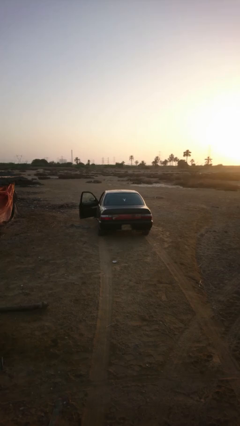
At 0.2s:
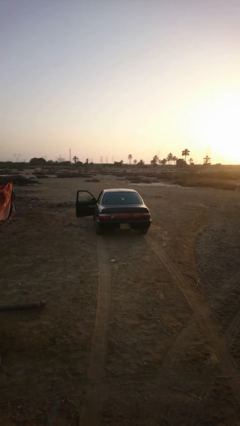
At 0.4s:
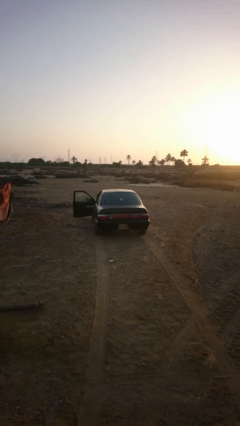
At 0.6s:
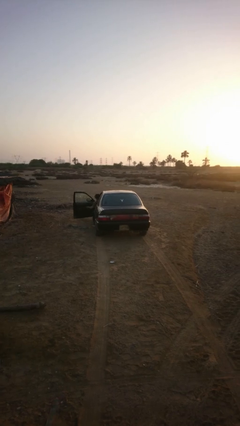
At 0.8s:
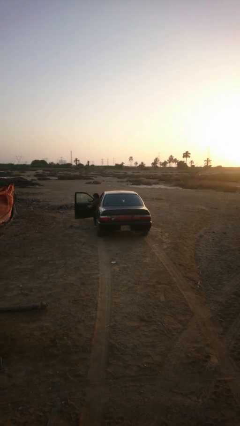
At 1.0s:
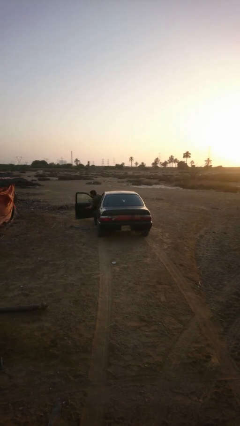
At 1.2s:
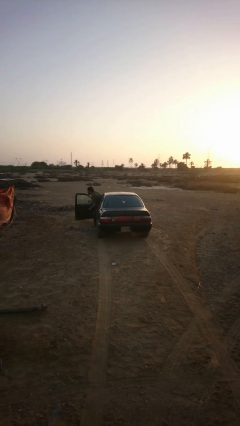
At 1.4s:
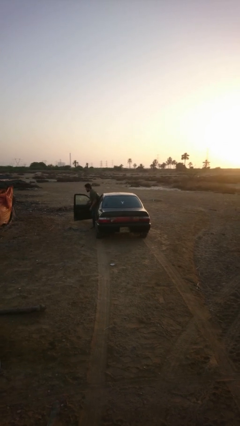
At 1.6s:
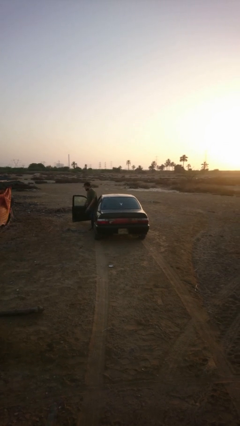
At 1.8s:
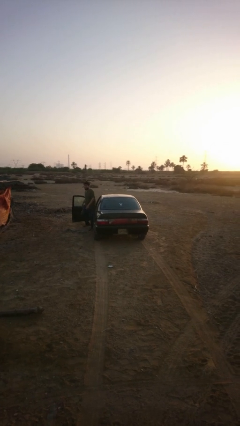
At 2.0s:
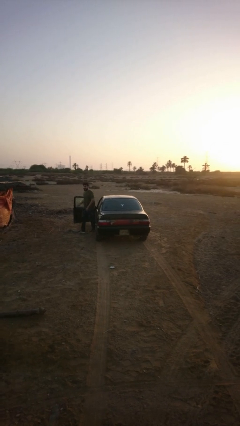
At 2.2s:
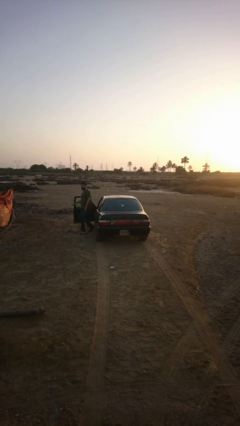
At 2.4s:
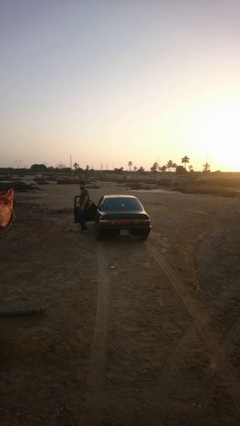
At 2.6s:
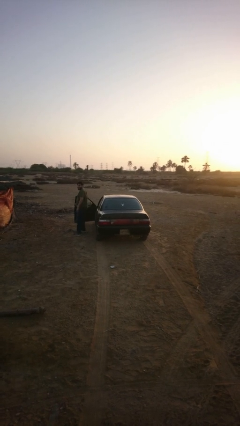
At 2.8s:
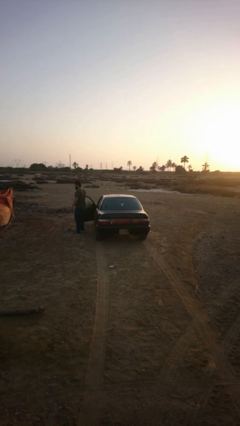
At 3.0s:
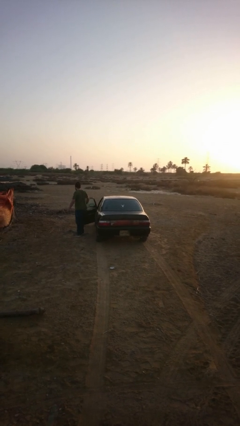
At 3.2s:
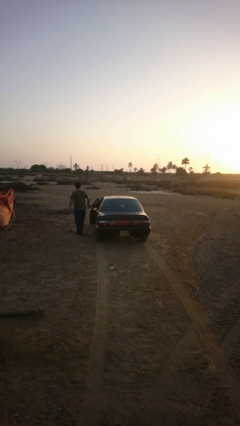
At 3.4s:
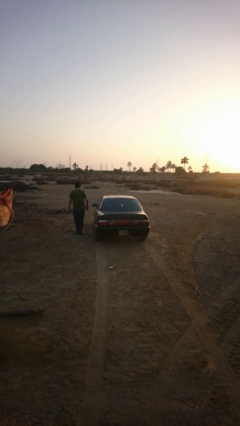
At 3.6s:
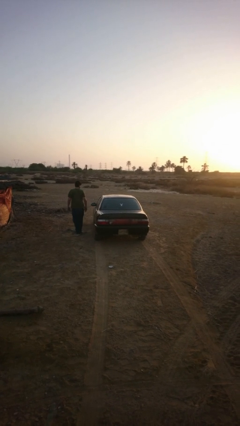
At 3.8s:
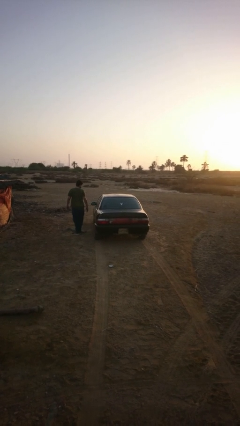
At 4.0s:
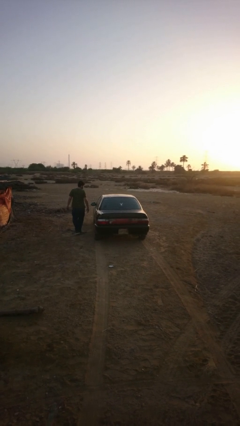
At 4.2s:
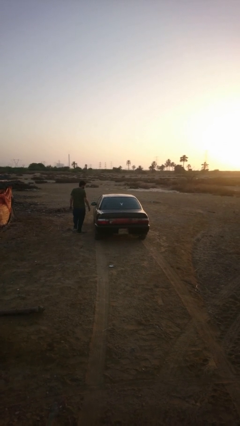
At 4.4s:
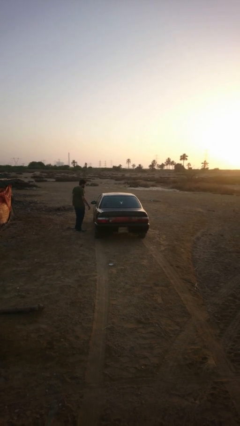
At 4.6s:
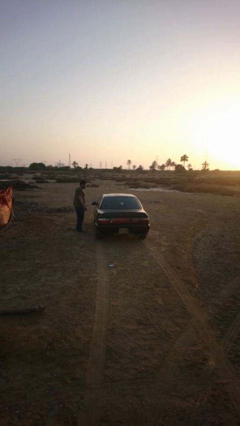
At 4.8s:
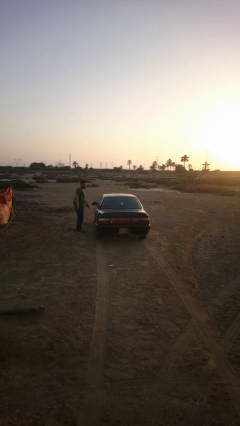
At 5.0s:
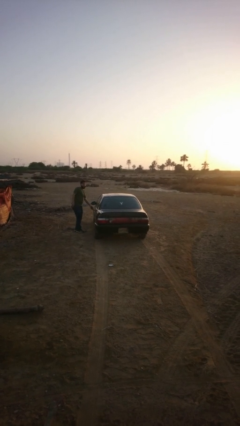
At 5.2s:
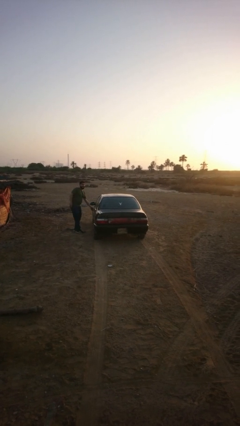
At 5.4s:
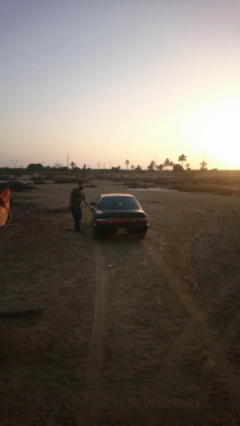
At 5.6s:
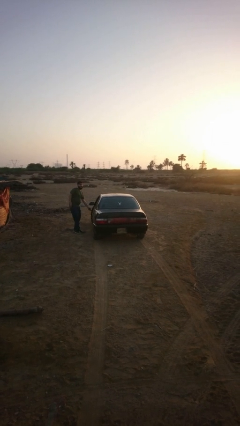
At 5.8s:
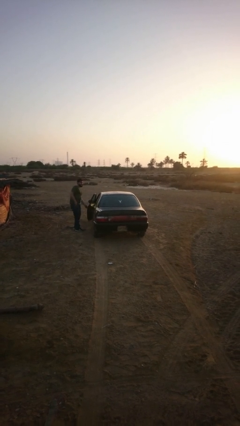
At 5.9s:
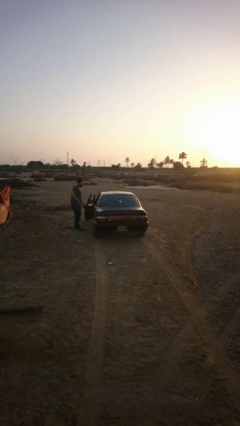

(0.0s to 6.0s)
car drops off person

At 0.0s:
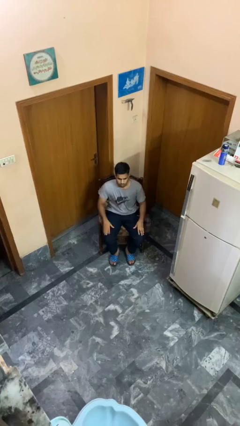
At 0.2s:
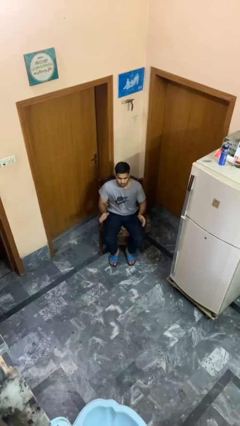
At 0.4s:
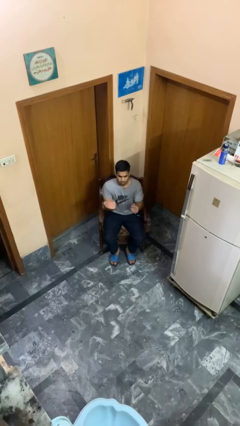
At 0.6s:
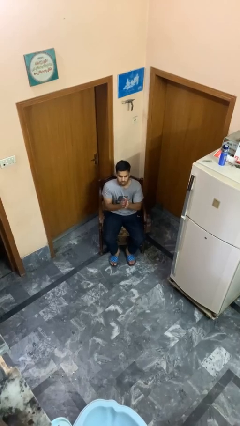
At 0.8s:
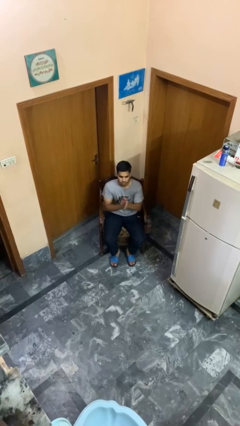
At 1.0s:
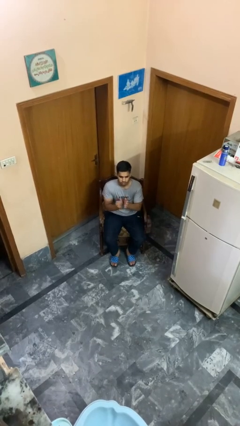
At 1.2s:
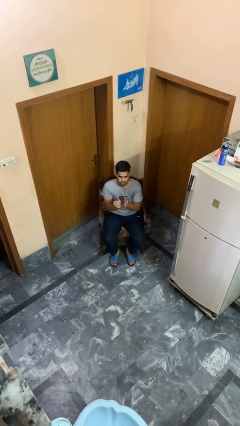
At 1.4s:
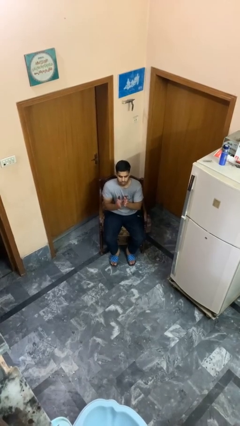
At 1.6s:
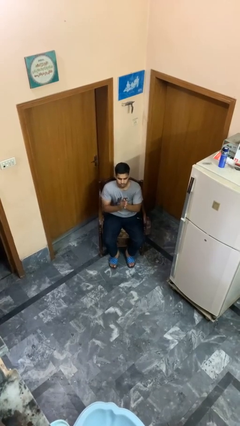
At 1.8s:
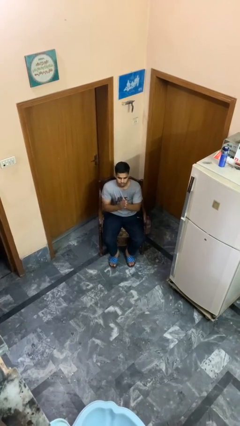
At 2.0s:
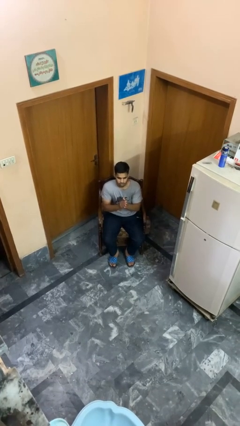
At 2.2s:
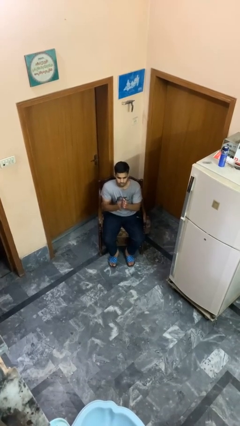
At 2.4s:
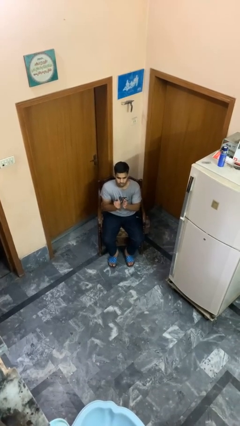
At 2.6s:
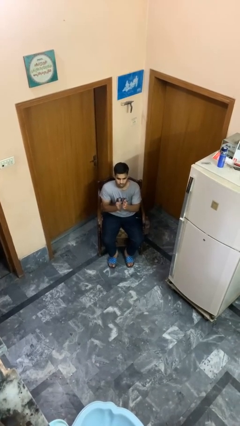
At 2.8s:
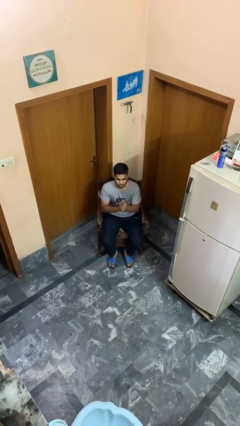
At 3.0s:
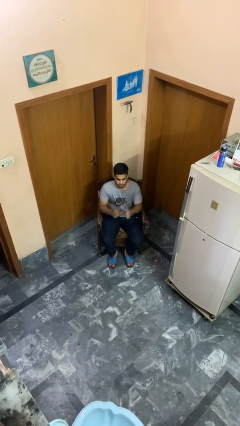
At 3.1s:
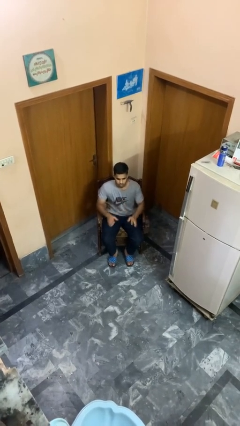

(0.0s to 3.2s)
person claps hands

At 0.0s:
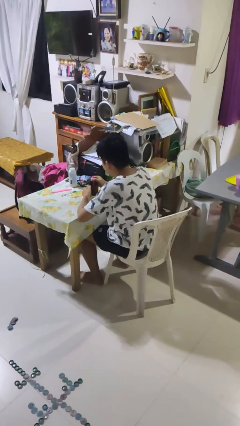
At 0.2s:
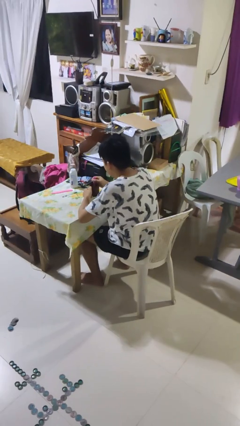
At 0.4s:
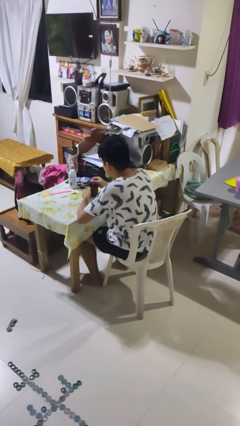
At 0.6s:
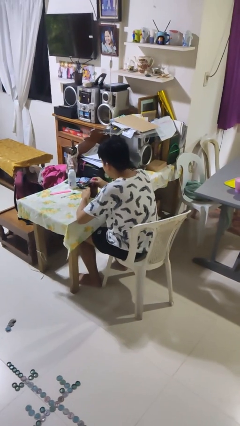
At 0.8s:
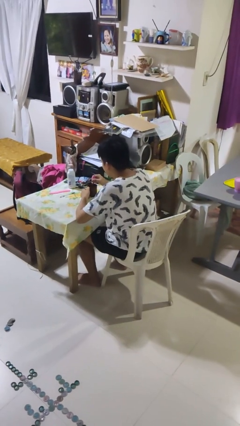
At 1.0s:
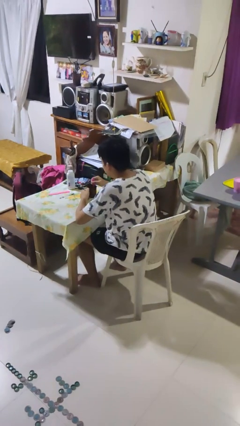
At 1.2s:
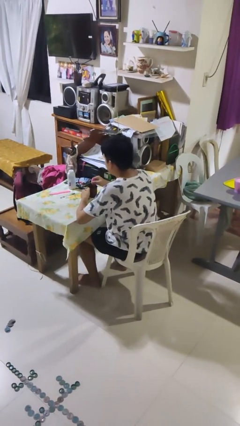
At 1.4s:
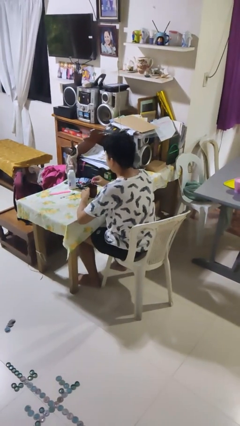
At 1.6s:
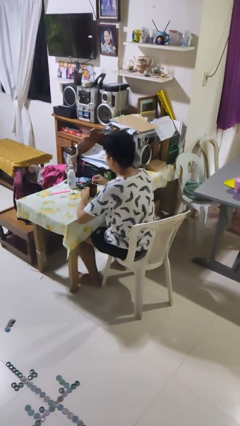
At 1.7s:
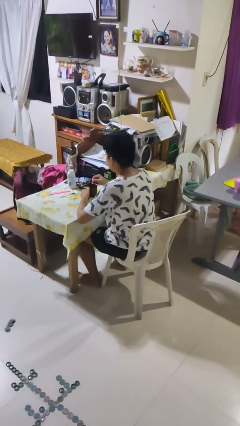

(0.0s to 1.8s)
person stirs mug

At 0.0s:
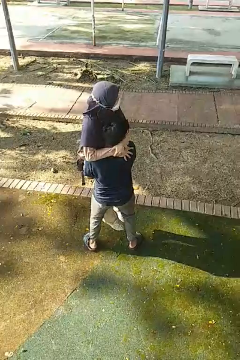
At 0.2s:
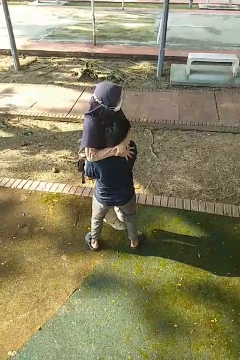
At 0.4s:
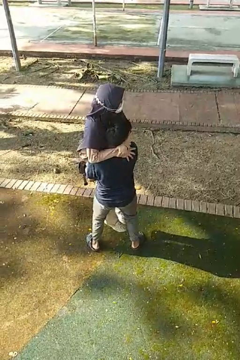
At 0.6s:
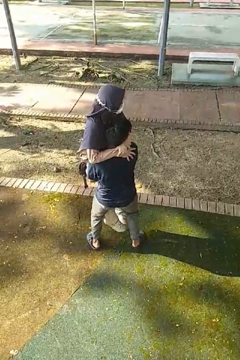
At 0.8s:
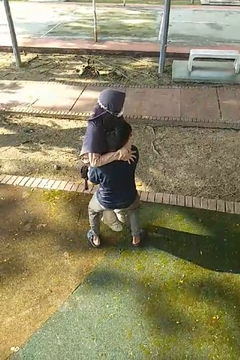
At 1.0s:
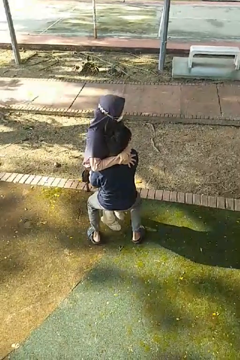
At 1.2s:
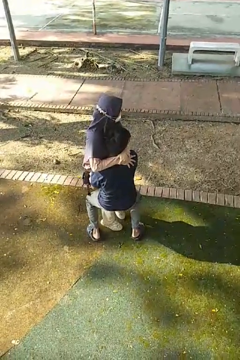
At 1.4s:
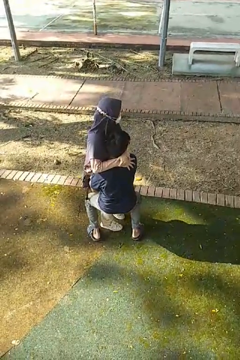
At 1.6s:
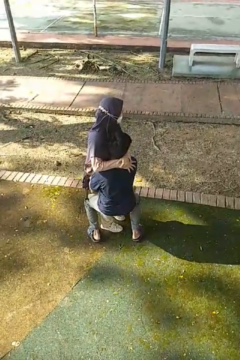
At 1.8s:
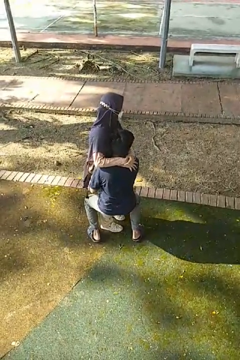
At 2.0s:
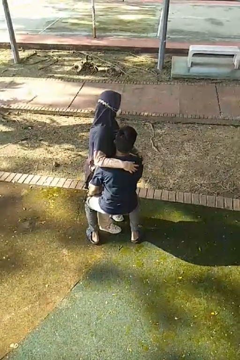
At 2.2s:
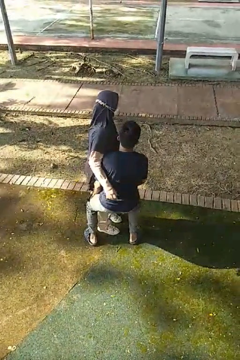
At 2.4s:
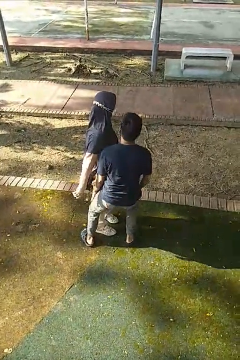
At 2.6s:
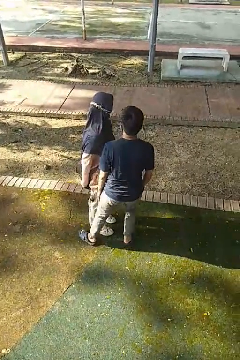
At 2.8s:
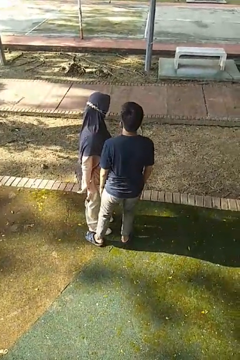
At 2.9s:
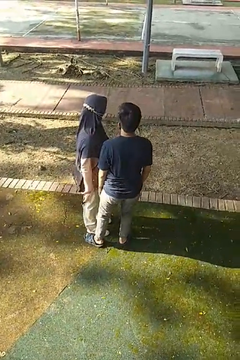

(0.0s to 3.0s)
person puts down person

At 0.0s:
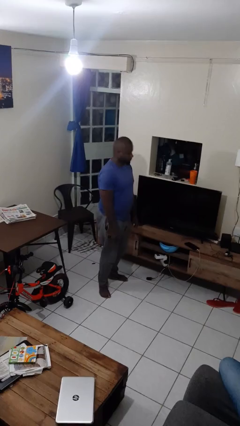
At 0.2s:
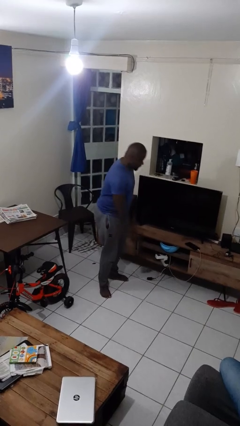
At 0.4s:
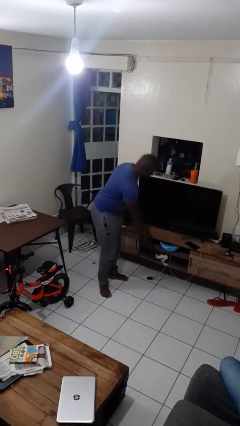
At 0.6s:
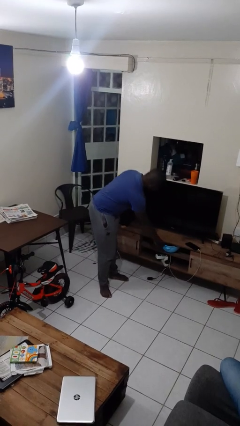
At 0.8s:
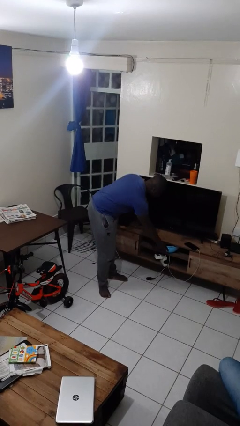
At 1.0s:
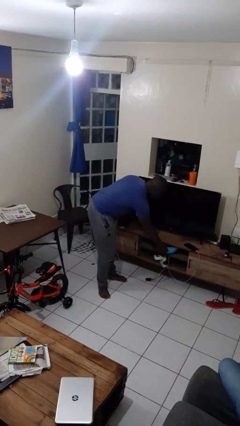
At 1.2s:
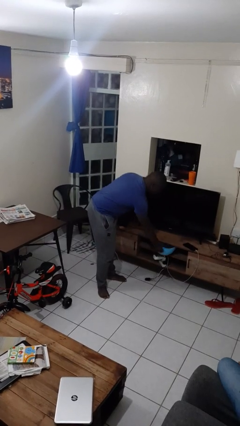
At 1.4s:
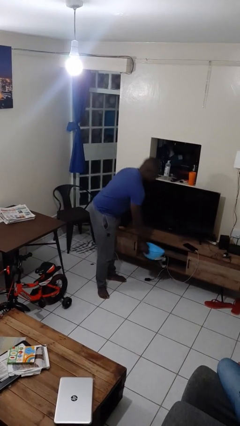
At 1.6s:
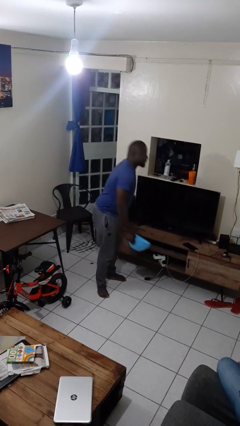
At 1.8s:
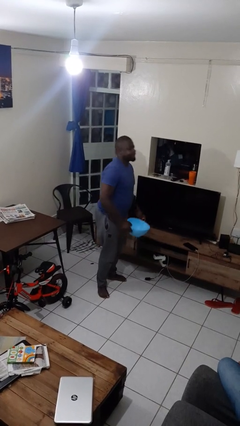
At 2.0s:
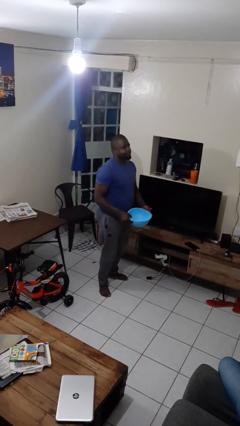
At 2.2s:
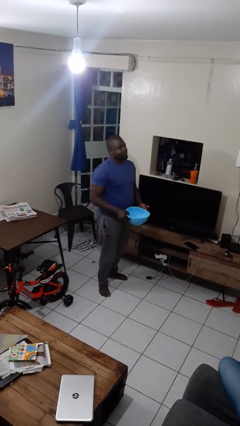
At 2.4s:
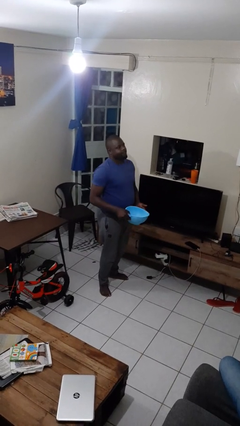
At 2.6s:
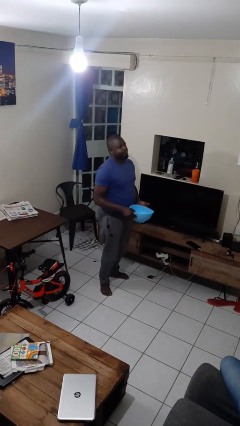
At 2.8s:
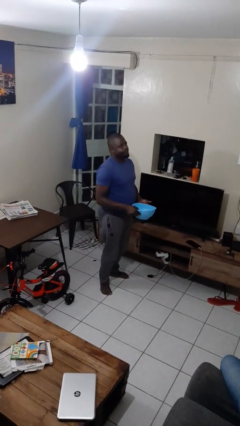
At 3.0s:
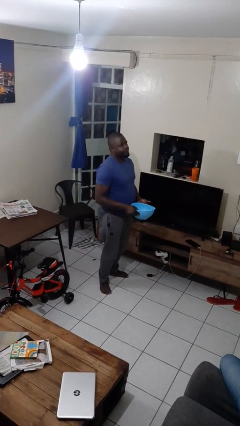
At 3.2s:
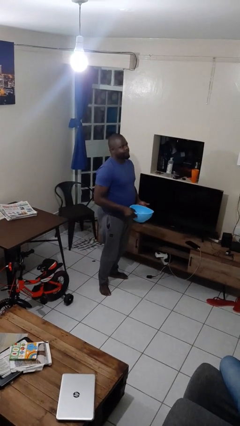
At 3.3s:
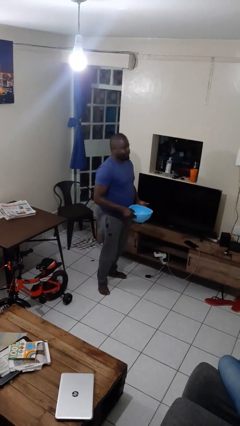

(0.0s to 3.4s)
person picks up object from cabinet

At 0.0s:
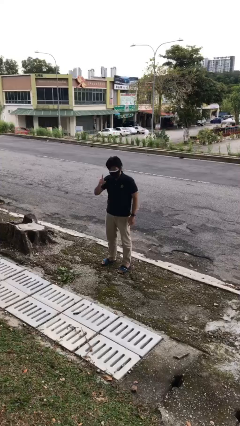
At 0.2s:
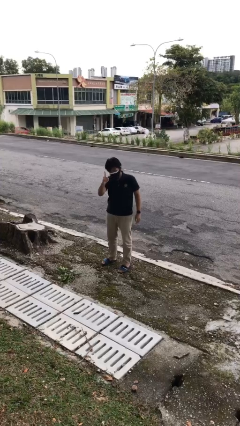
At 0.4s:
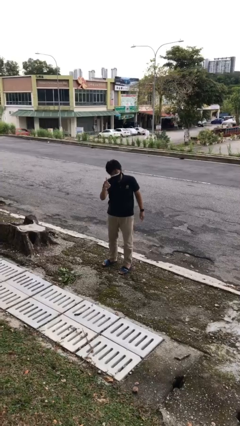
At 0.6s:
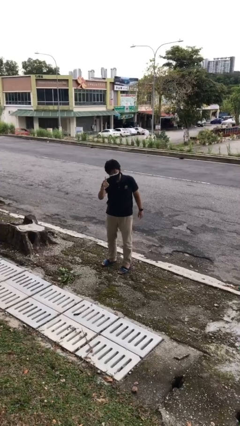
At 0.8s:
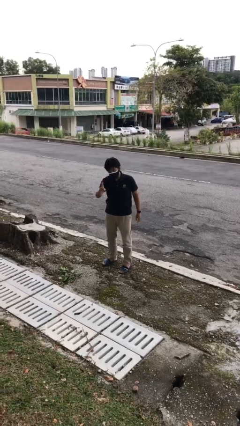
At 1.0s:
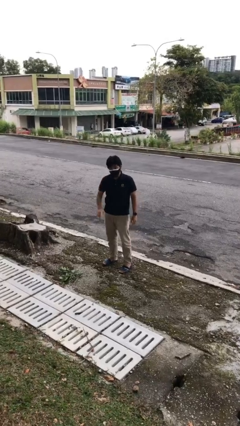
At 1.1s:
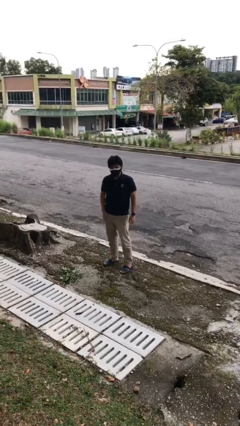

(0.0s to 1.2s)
person gestures number one
